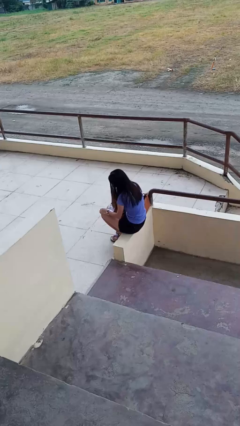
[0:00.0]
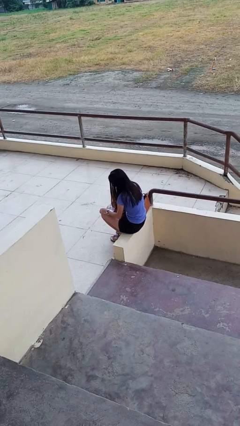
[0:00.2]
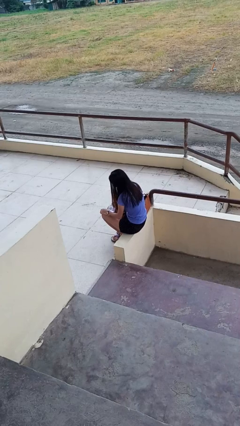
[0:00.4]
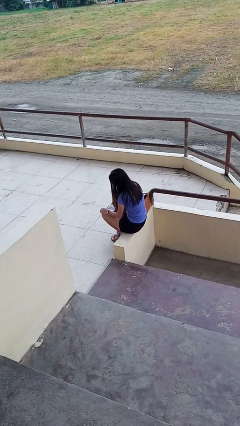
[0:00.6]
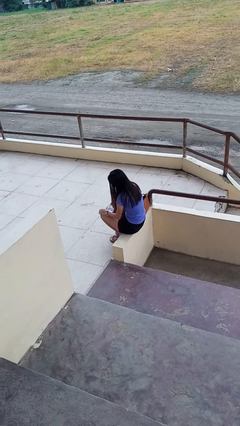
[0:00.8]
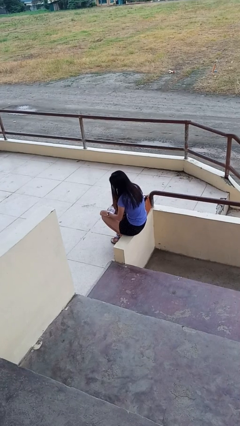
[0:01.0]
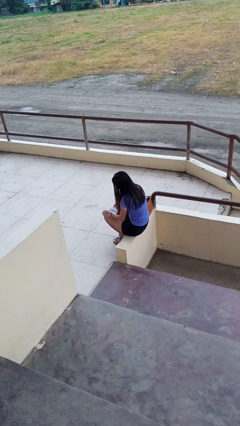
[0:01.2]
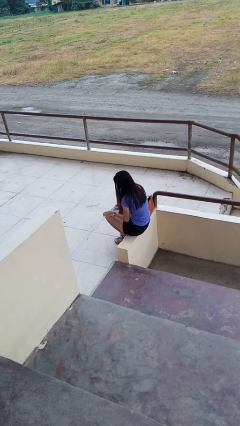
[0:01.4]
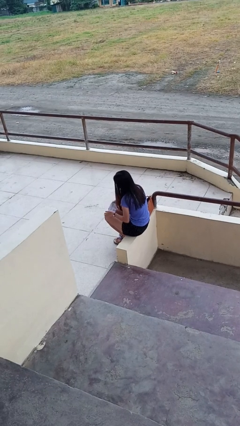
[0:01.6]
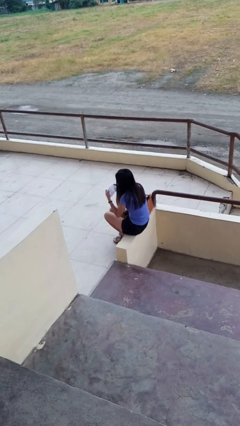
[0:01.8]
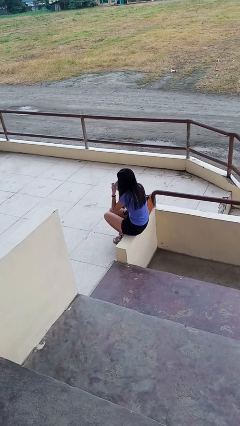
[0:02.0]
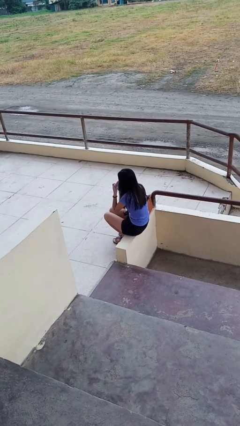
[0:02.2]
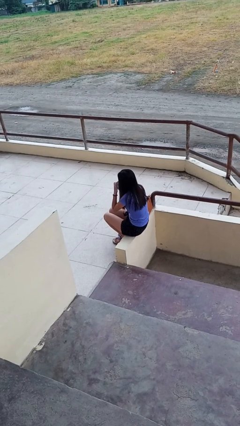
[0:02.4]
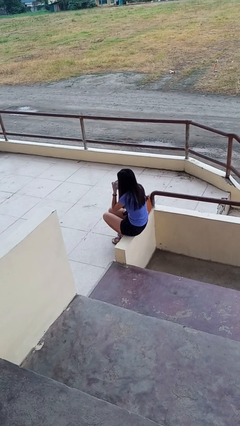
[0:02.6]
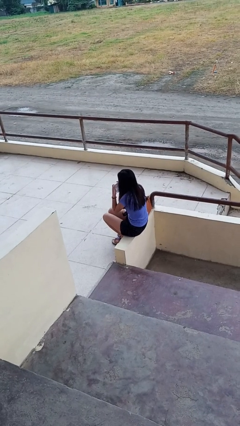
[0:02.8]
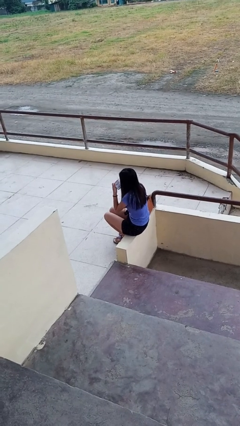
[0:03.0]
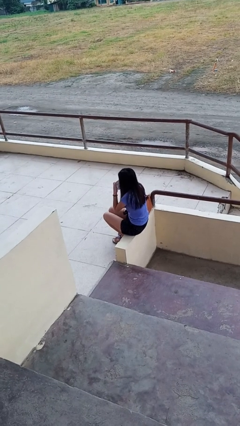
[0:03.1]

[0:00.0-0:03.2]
person wipes mouth with napkin

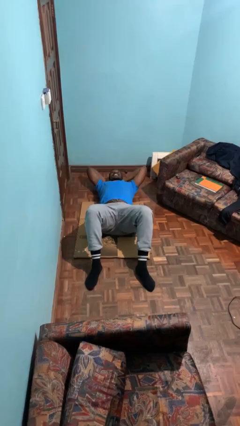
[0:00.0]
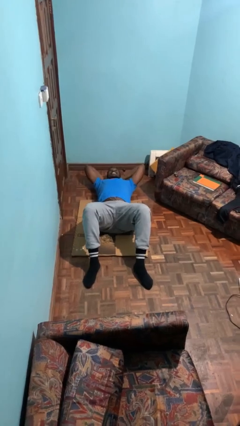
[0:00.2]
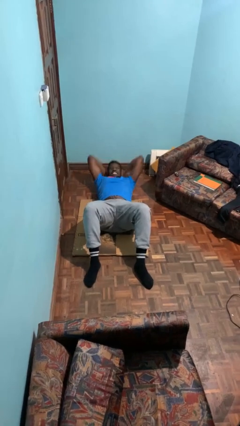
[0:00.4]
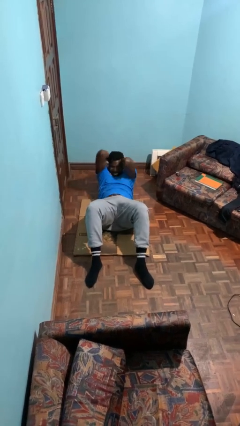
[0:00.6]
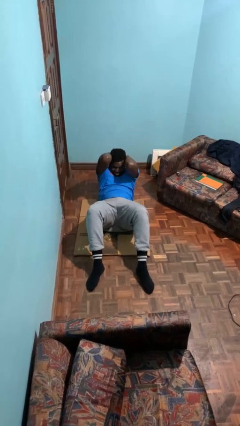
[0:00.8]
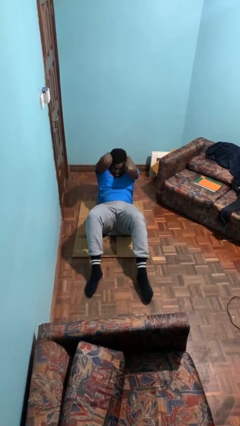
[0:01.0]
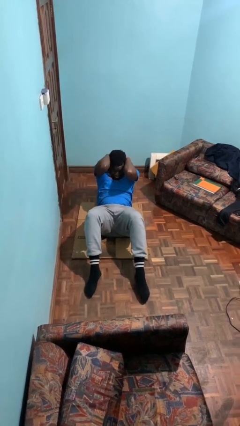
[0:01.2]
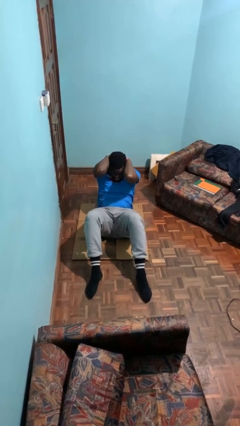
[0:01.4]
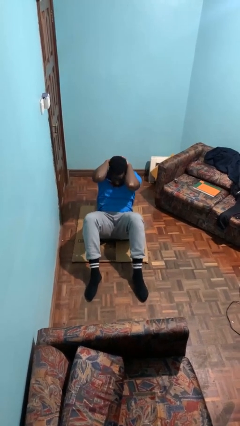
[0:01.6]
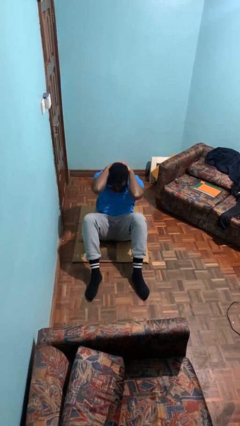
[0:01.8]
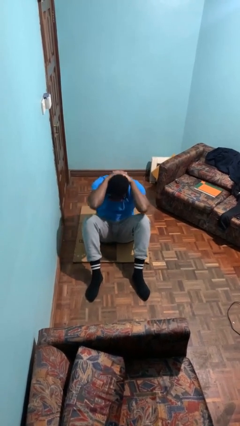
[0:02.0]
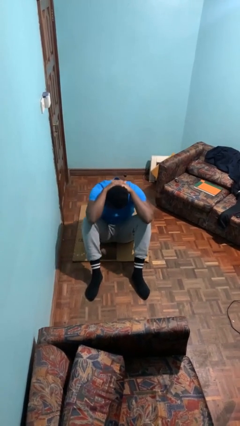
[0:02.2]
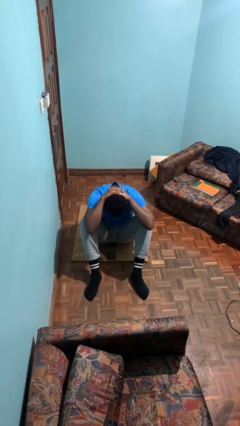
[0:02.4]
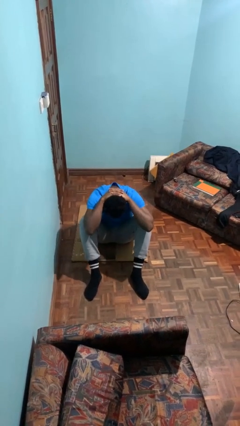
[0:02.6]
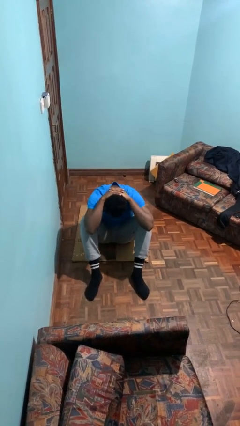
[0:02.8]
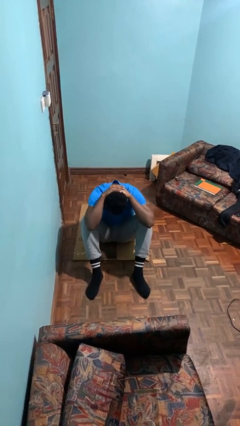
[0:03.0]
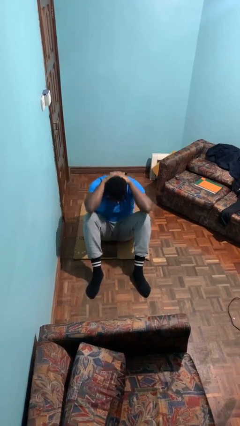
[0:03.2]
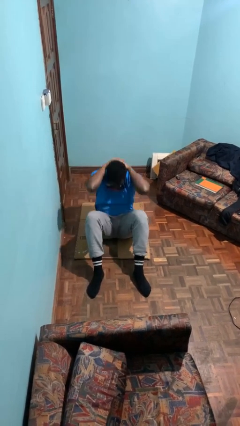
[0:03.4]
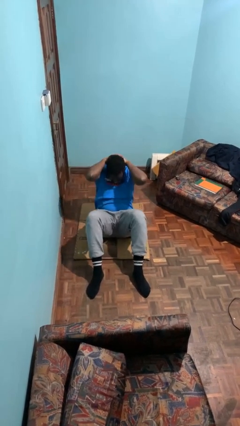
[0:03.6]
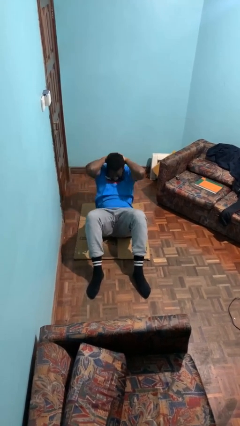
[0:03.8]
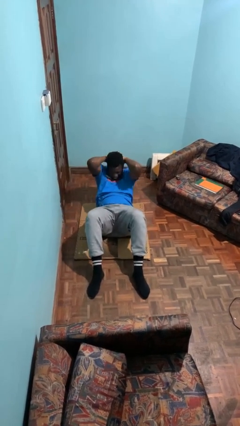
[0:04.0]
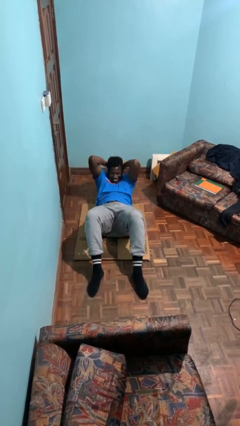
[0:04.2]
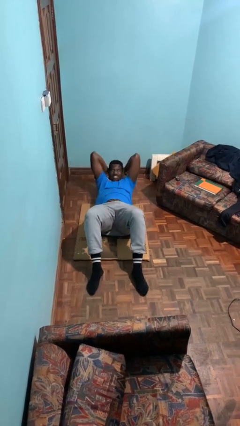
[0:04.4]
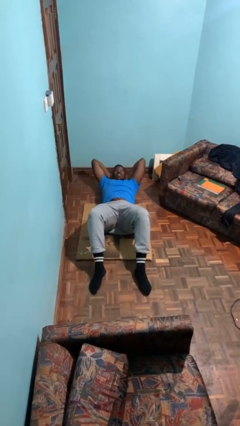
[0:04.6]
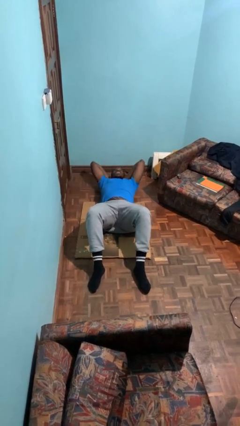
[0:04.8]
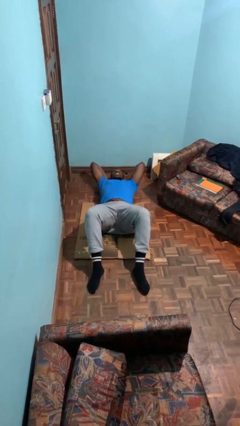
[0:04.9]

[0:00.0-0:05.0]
person exercises with situp

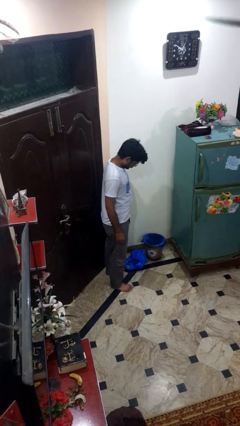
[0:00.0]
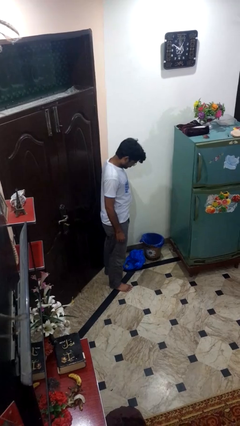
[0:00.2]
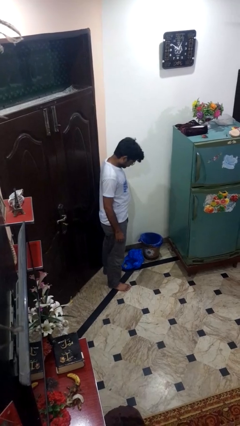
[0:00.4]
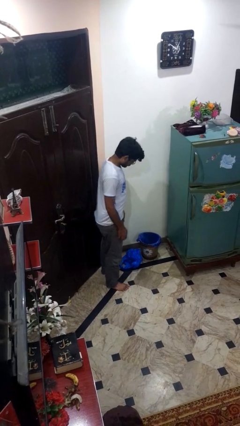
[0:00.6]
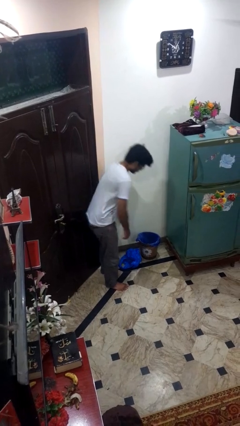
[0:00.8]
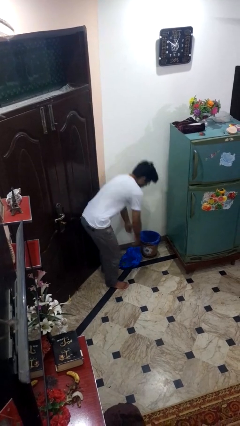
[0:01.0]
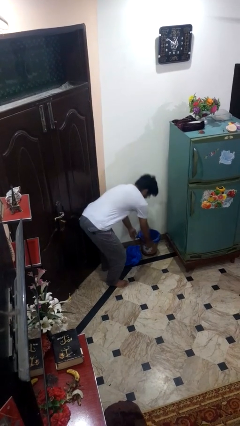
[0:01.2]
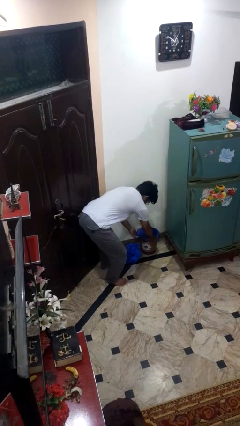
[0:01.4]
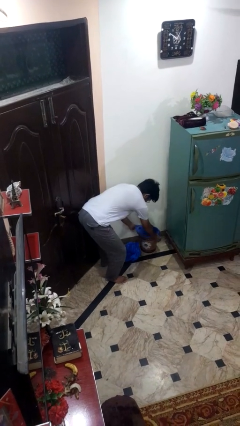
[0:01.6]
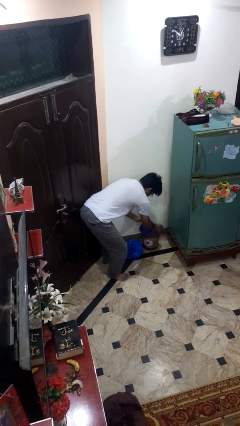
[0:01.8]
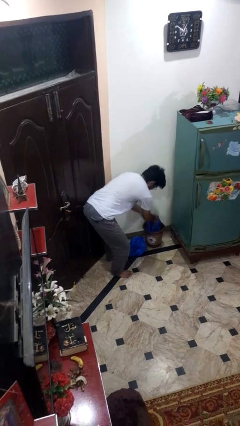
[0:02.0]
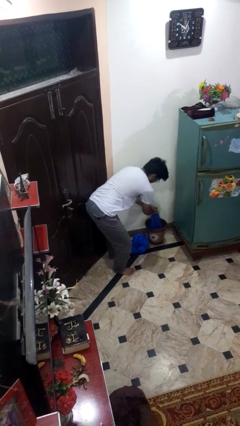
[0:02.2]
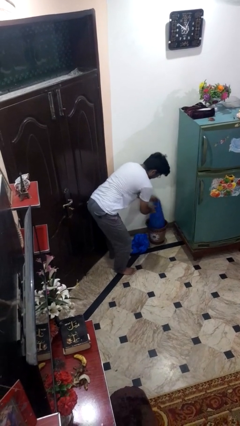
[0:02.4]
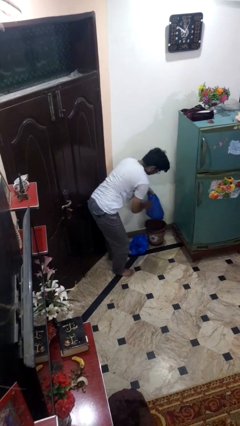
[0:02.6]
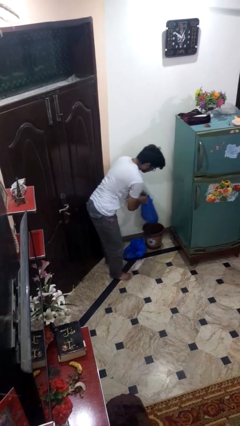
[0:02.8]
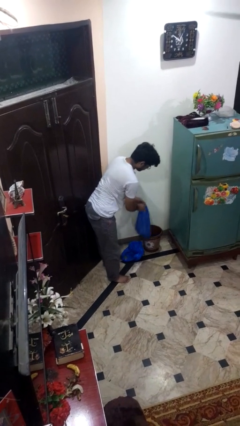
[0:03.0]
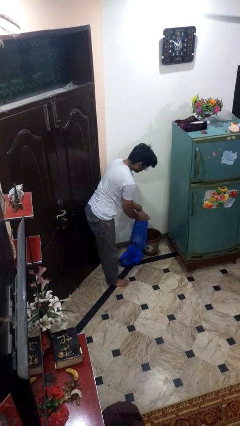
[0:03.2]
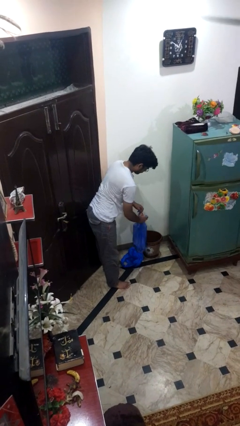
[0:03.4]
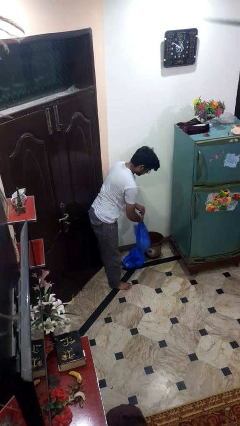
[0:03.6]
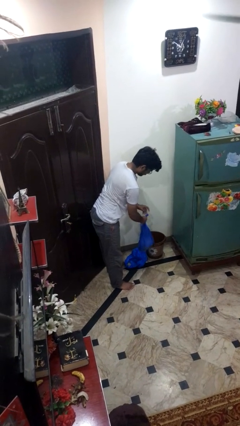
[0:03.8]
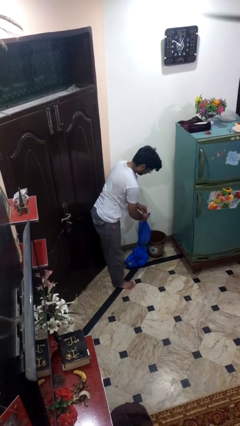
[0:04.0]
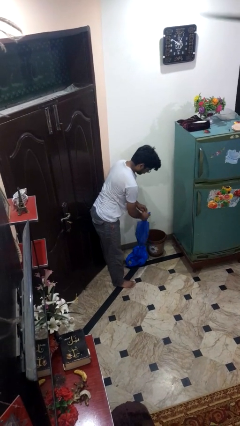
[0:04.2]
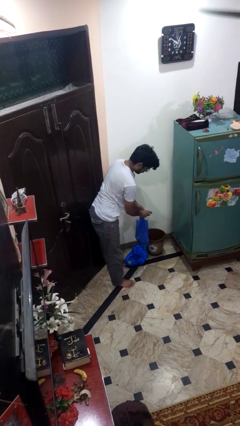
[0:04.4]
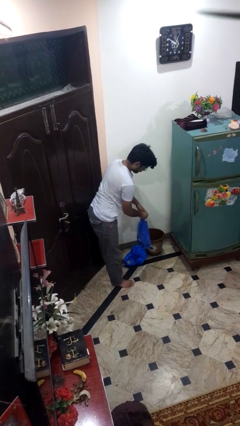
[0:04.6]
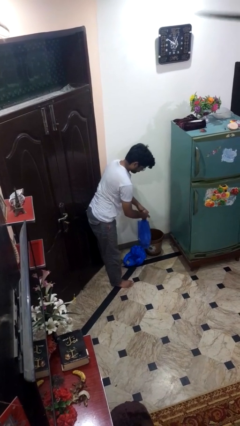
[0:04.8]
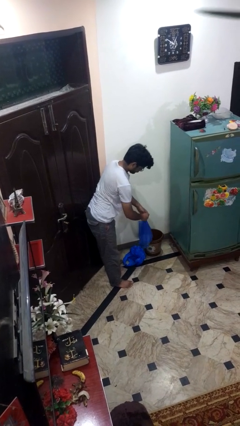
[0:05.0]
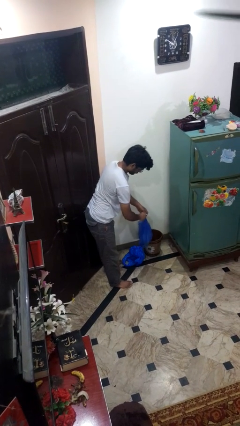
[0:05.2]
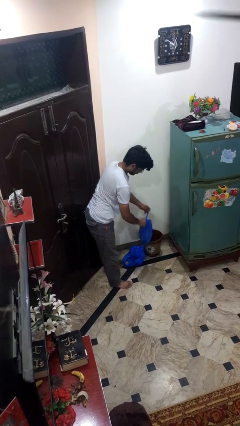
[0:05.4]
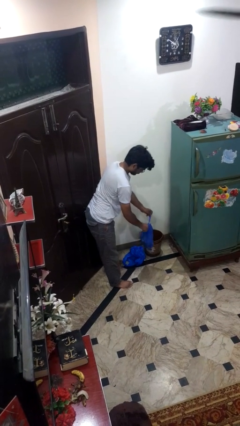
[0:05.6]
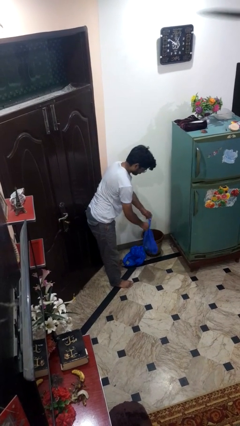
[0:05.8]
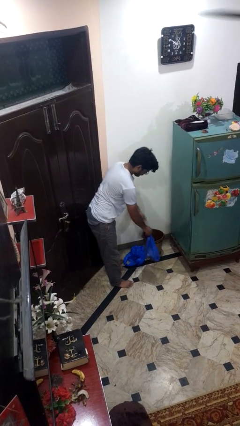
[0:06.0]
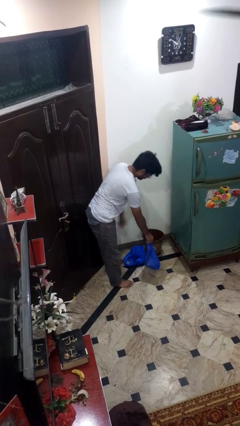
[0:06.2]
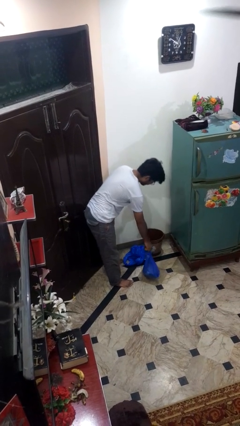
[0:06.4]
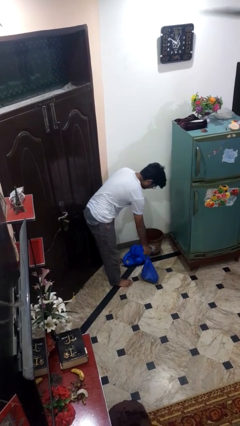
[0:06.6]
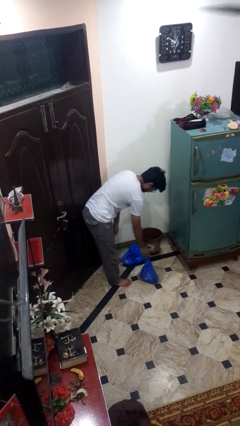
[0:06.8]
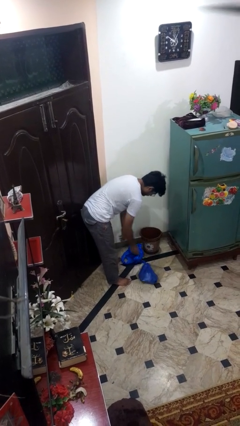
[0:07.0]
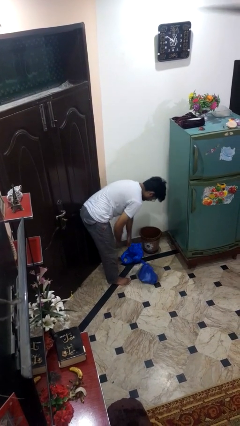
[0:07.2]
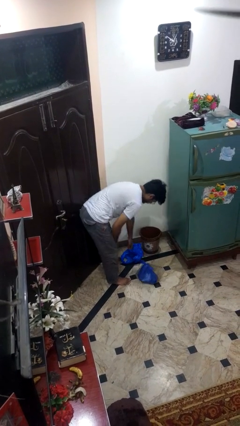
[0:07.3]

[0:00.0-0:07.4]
person removes trashbag from trashcan

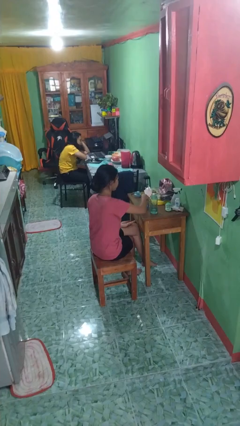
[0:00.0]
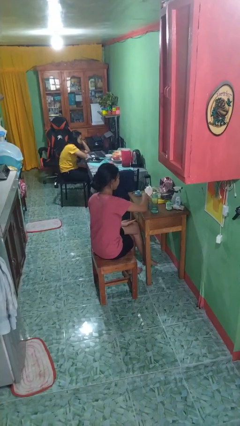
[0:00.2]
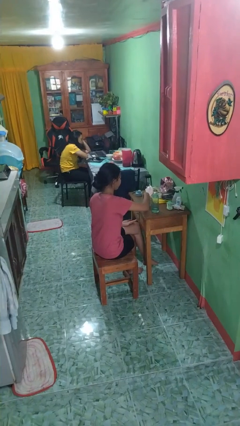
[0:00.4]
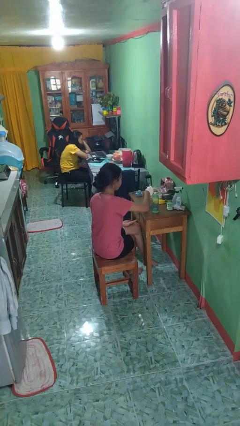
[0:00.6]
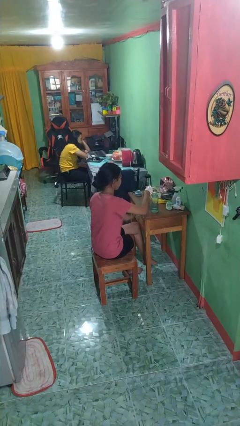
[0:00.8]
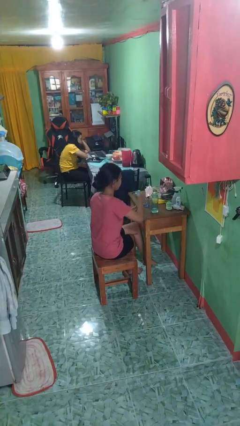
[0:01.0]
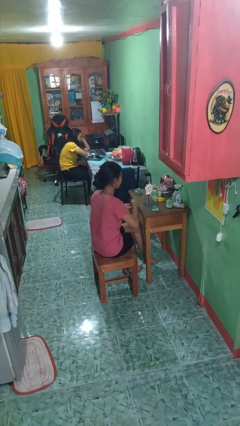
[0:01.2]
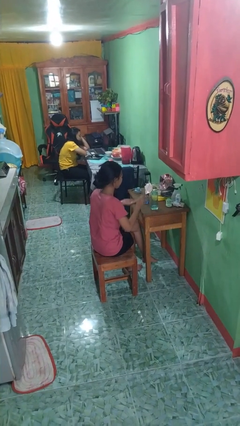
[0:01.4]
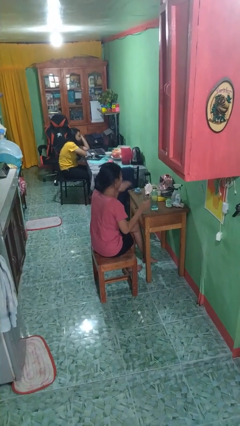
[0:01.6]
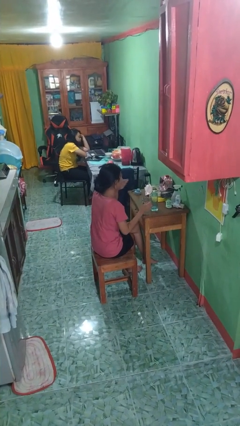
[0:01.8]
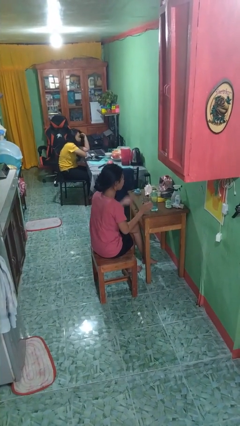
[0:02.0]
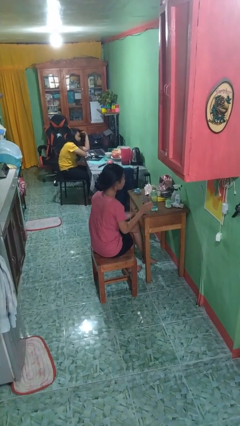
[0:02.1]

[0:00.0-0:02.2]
person takes medicine pills
